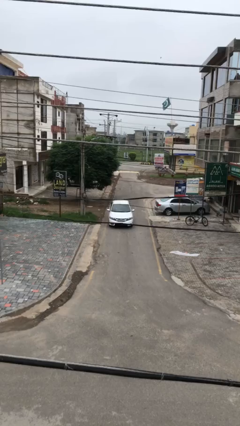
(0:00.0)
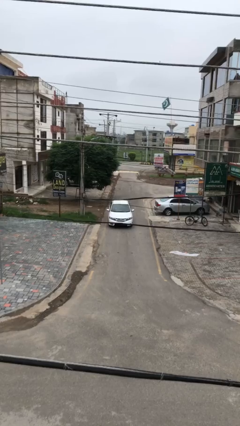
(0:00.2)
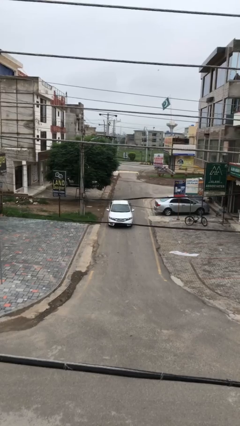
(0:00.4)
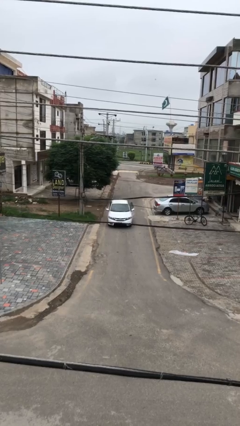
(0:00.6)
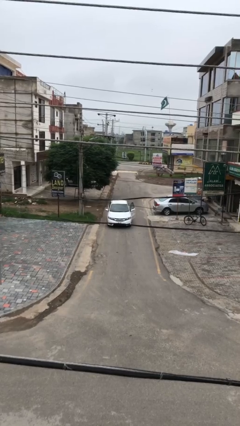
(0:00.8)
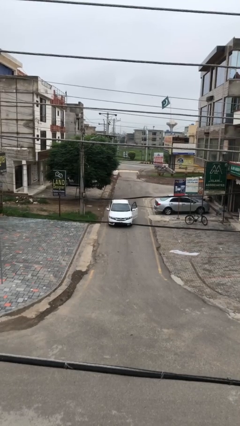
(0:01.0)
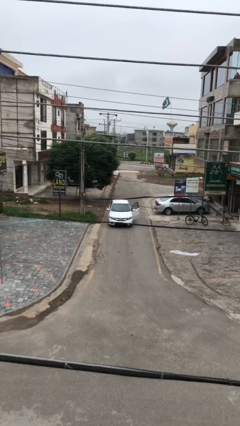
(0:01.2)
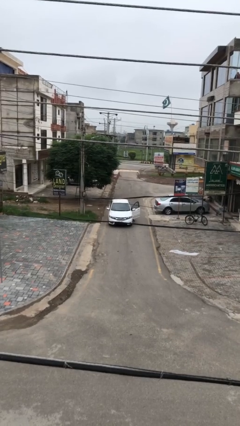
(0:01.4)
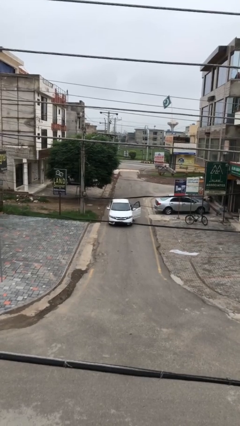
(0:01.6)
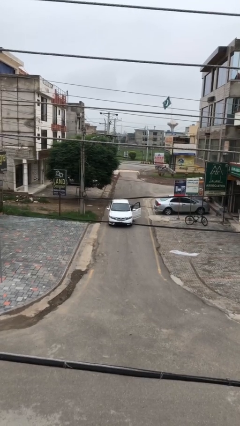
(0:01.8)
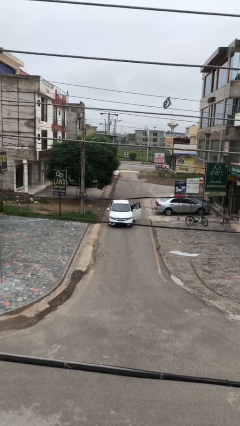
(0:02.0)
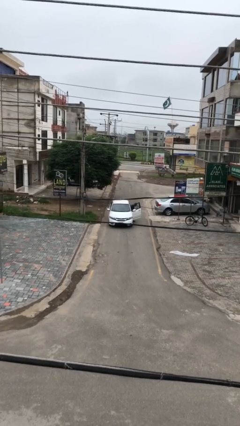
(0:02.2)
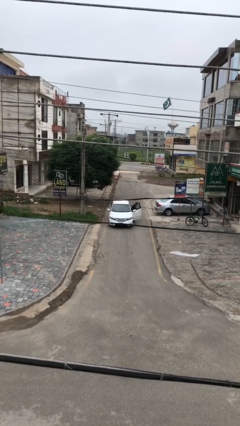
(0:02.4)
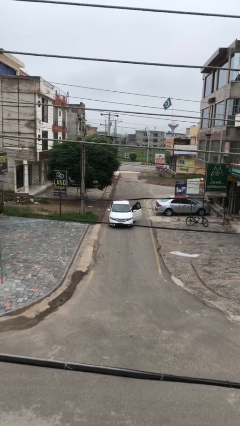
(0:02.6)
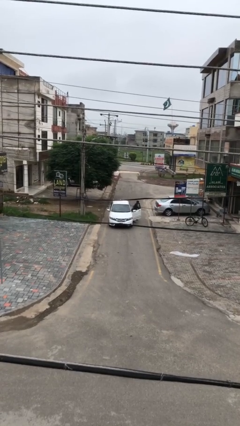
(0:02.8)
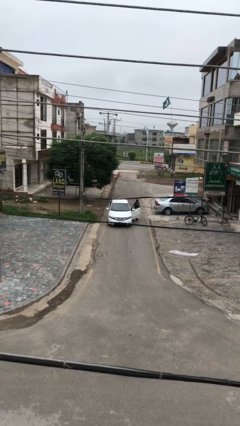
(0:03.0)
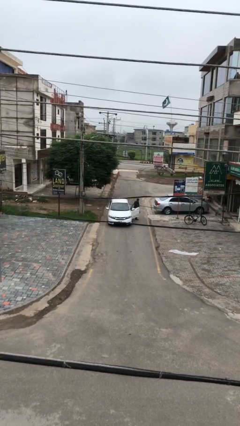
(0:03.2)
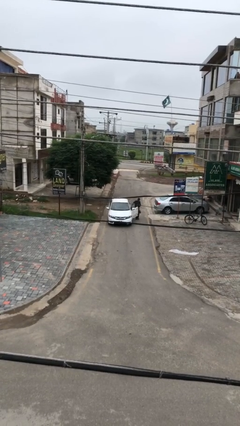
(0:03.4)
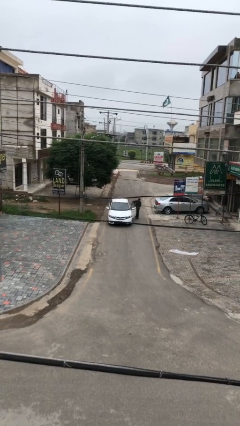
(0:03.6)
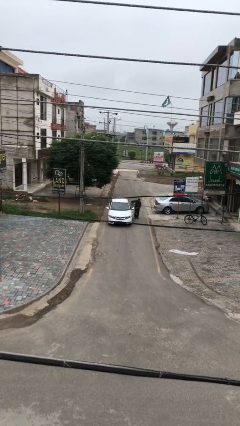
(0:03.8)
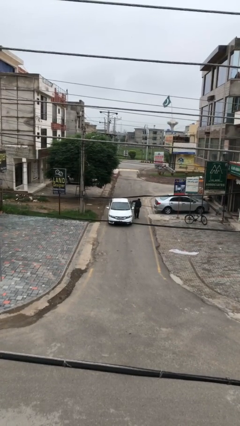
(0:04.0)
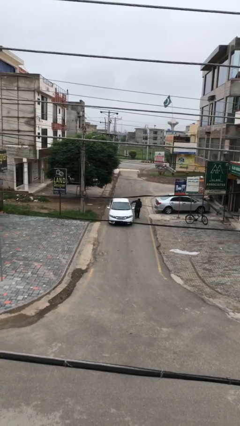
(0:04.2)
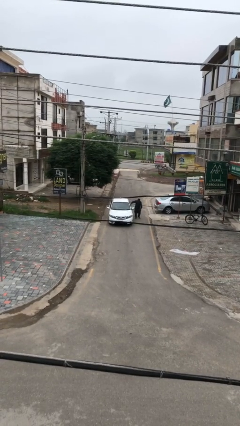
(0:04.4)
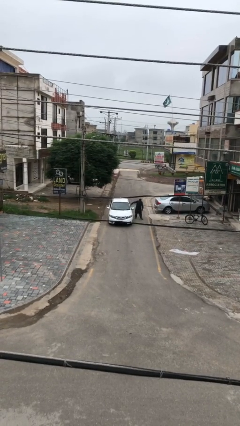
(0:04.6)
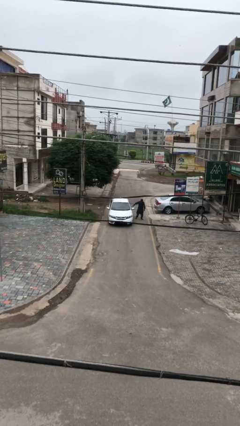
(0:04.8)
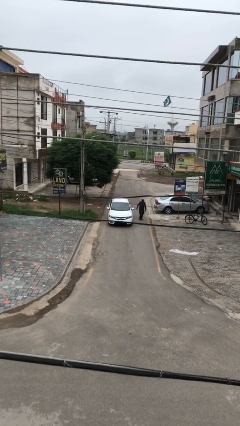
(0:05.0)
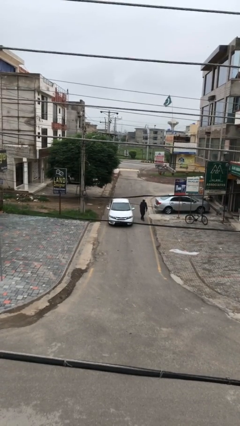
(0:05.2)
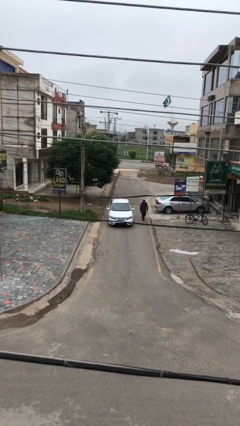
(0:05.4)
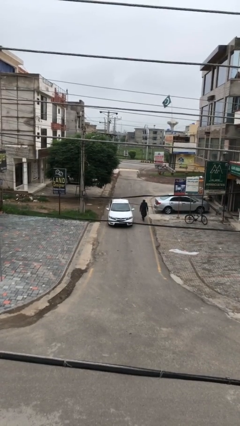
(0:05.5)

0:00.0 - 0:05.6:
car drops off person

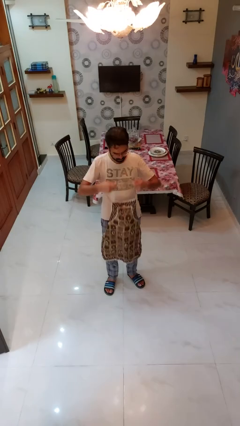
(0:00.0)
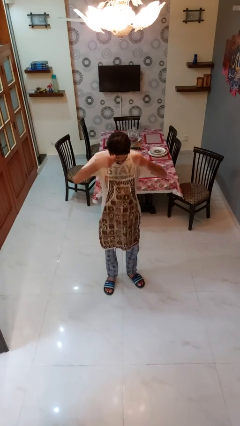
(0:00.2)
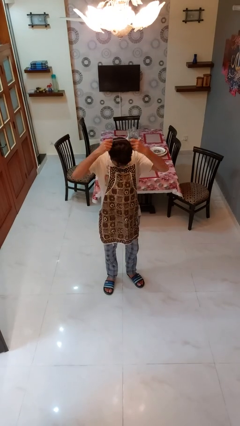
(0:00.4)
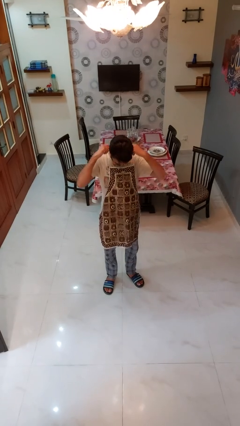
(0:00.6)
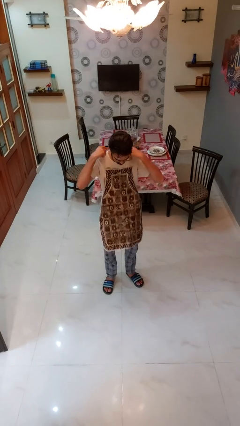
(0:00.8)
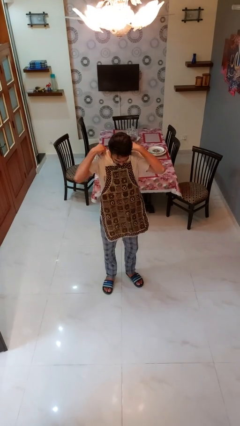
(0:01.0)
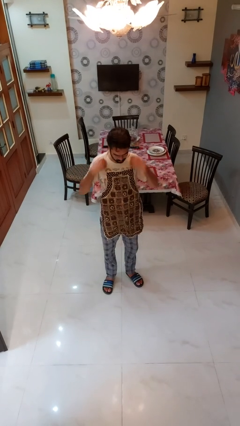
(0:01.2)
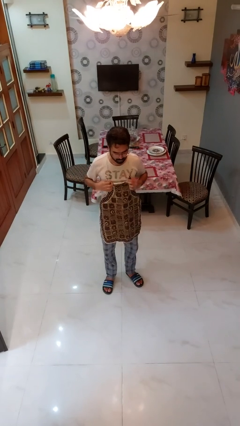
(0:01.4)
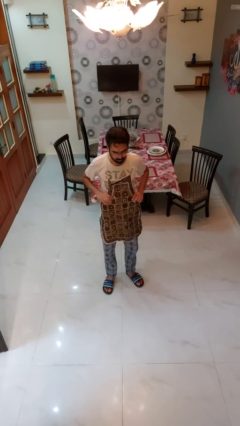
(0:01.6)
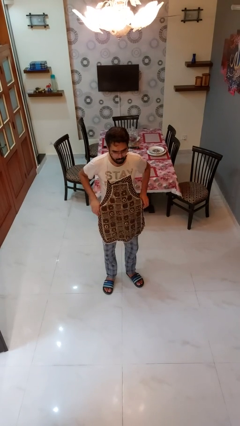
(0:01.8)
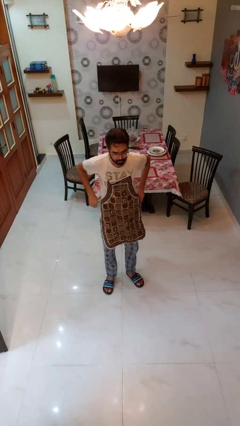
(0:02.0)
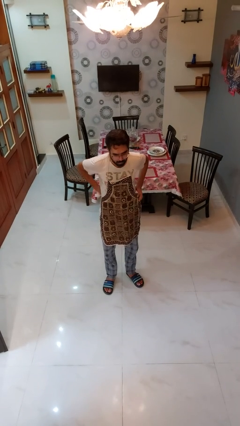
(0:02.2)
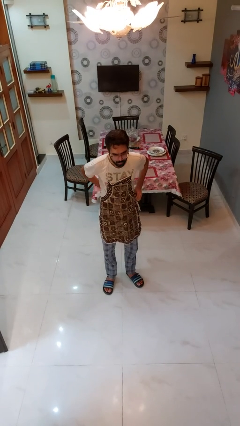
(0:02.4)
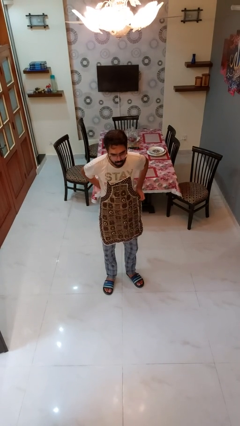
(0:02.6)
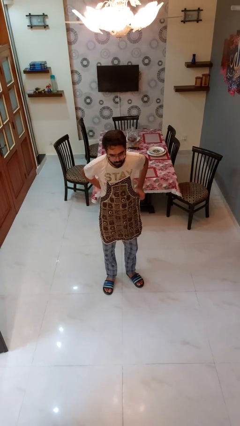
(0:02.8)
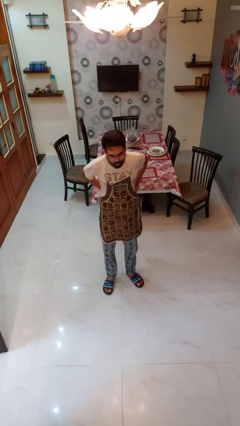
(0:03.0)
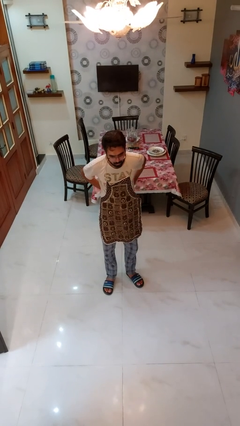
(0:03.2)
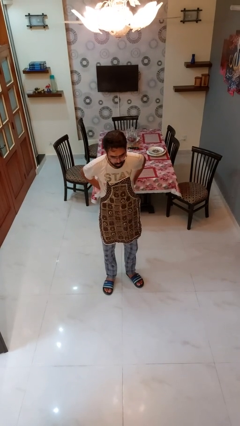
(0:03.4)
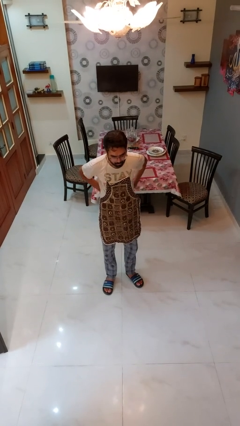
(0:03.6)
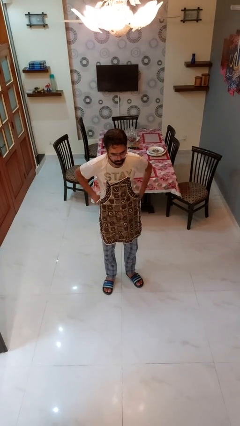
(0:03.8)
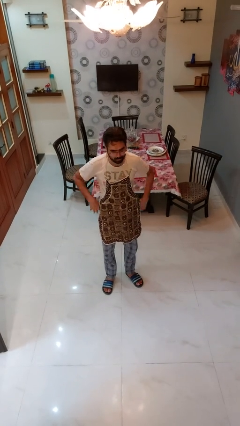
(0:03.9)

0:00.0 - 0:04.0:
person puts on apron

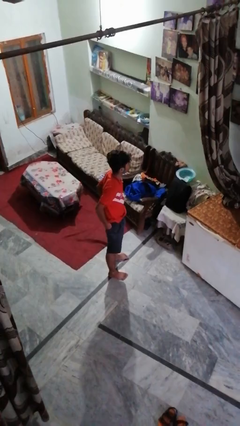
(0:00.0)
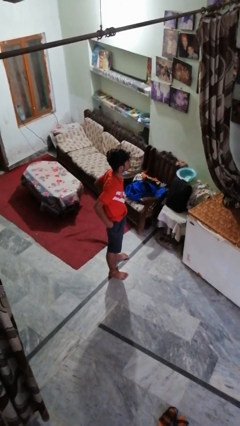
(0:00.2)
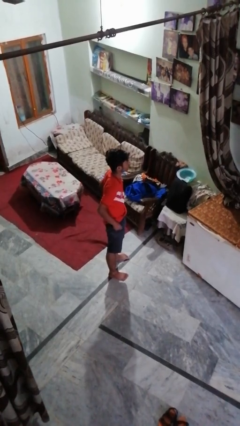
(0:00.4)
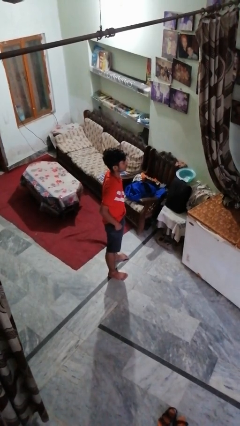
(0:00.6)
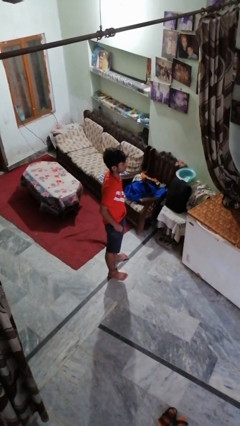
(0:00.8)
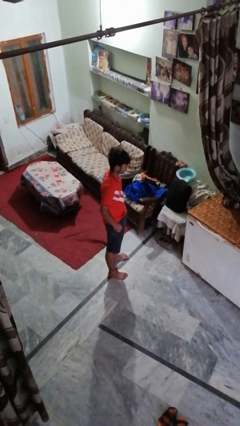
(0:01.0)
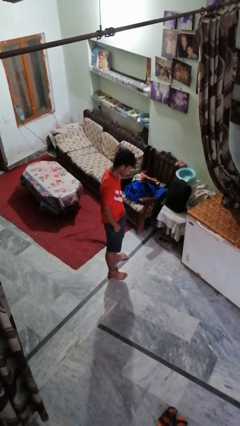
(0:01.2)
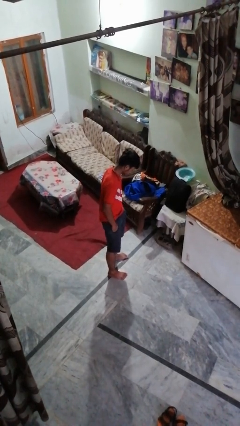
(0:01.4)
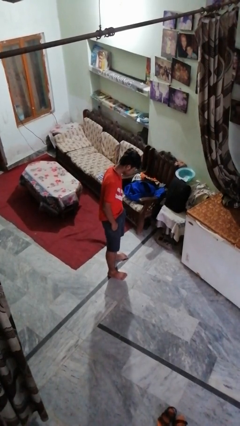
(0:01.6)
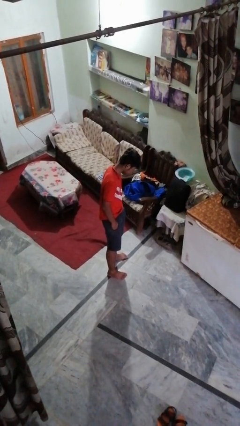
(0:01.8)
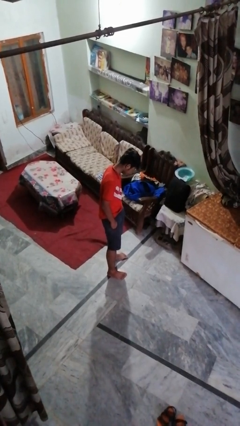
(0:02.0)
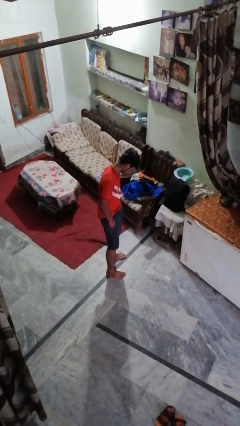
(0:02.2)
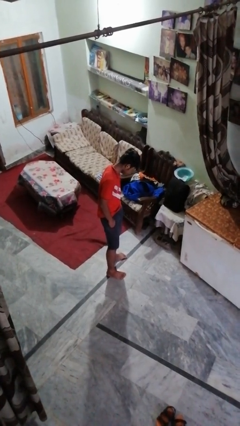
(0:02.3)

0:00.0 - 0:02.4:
person puts hands in back pockets

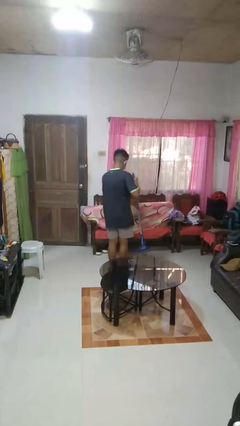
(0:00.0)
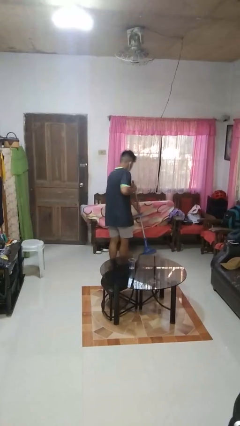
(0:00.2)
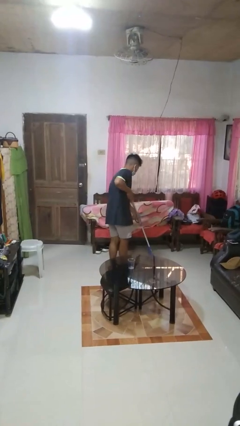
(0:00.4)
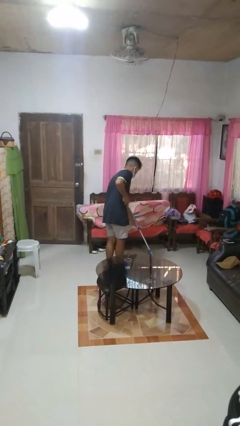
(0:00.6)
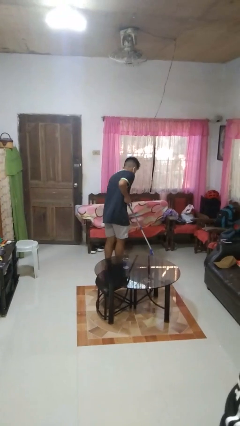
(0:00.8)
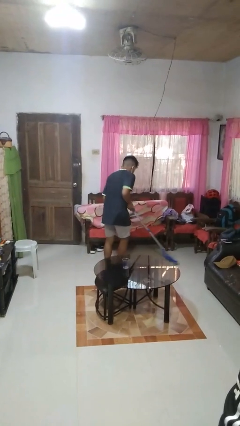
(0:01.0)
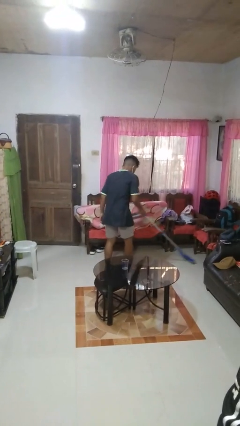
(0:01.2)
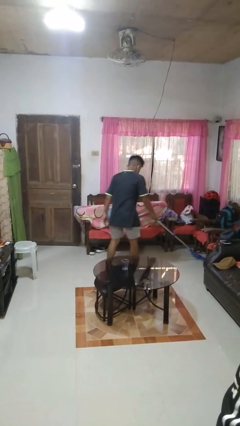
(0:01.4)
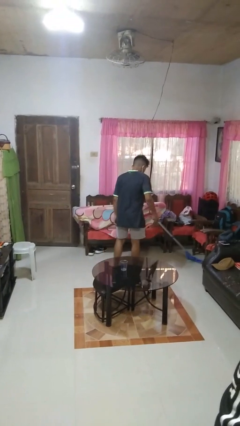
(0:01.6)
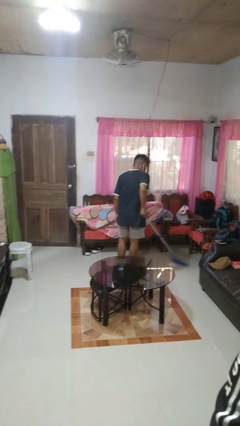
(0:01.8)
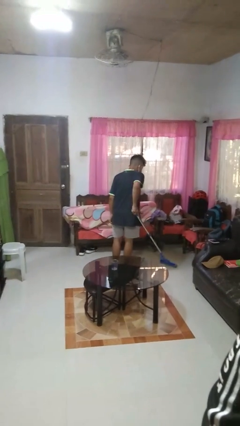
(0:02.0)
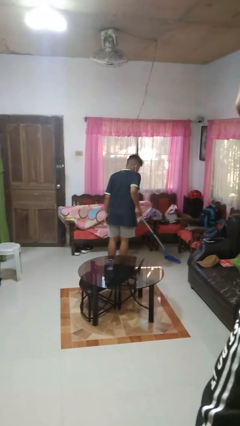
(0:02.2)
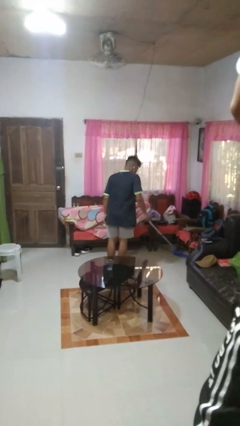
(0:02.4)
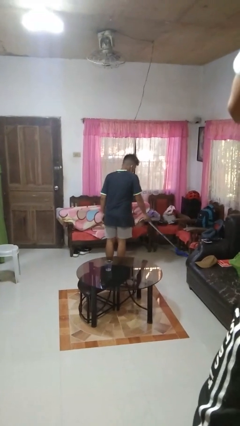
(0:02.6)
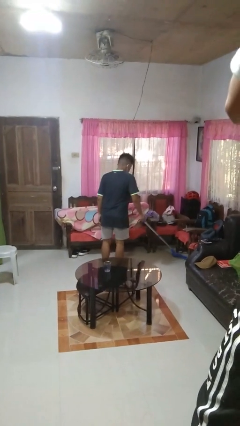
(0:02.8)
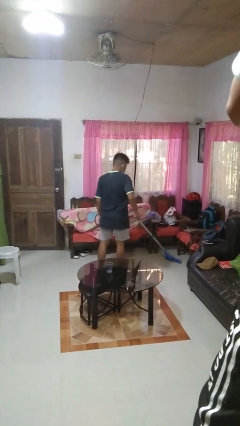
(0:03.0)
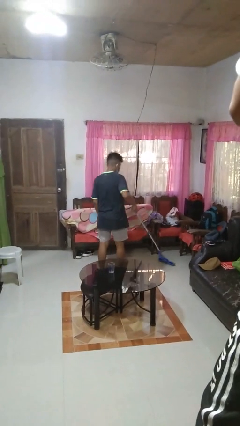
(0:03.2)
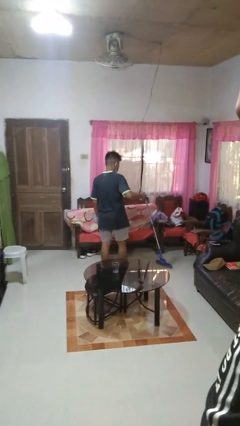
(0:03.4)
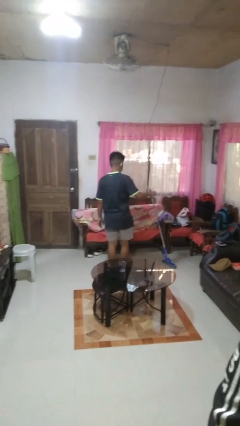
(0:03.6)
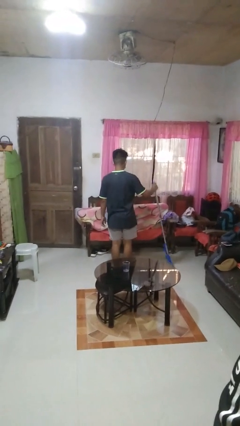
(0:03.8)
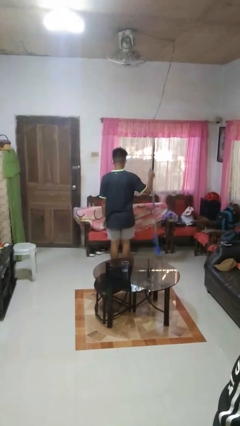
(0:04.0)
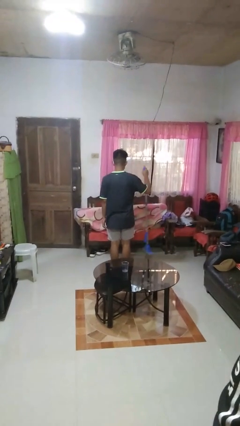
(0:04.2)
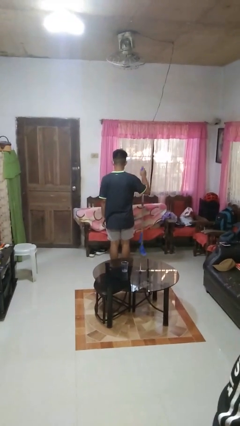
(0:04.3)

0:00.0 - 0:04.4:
person mops

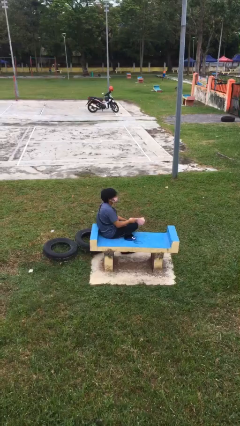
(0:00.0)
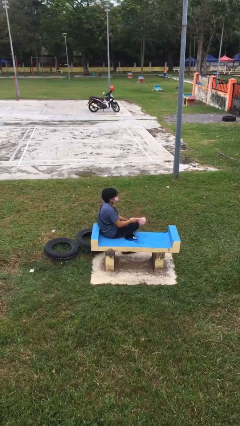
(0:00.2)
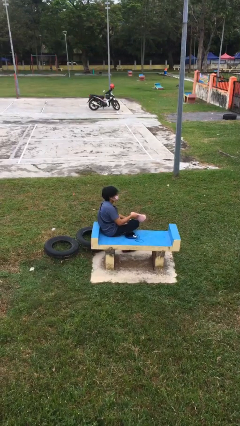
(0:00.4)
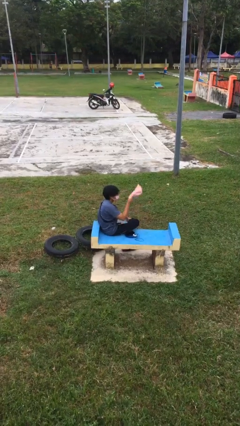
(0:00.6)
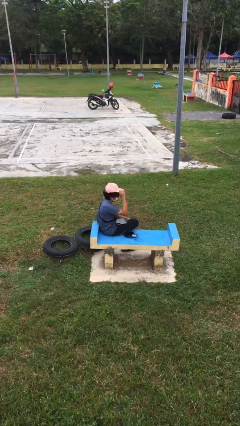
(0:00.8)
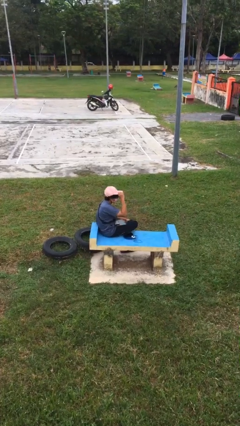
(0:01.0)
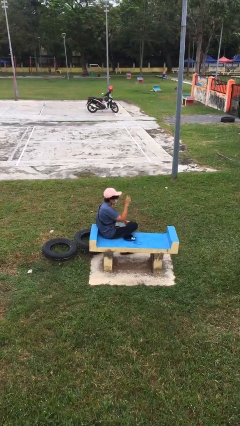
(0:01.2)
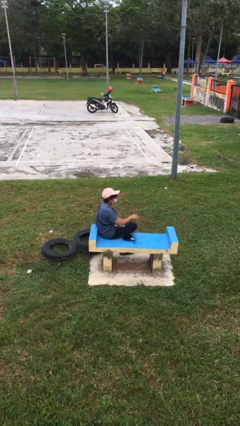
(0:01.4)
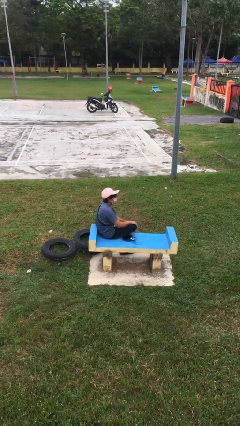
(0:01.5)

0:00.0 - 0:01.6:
person puts on hat
